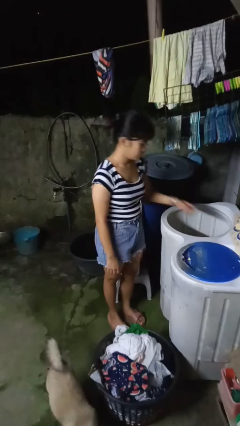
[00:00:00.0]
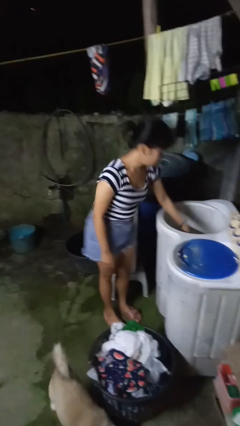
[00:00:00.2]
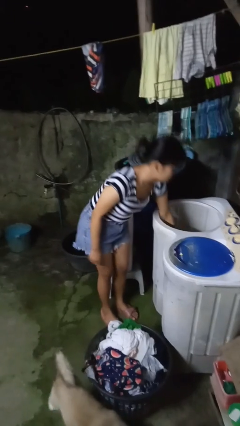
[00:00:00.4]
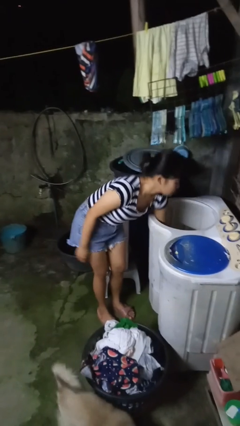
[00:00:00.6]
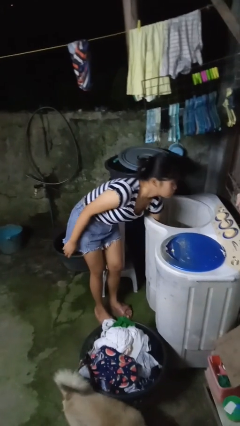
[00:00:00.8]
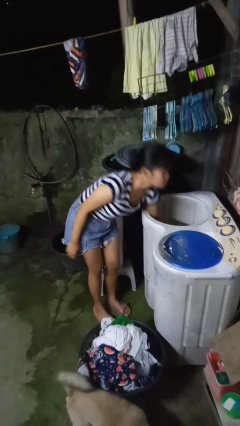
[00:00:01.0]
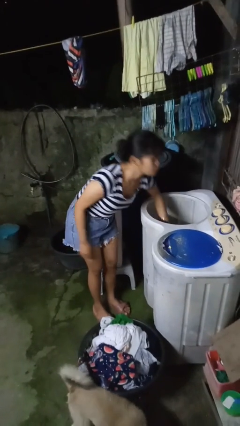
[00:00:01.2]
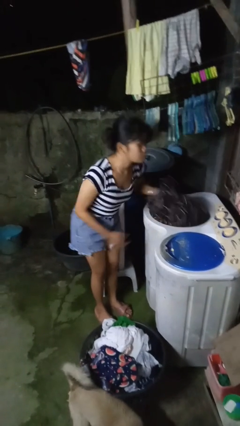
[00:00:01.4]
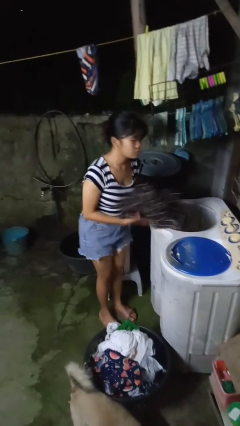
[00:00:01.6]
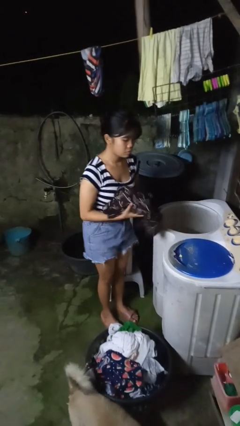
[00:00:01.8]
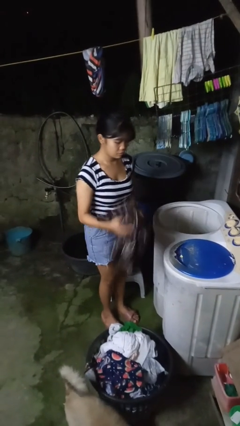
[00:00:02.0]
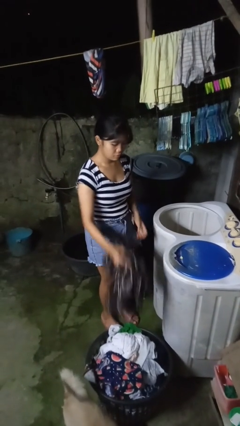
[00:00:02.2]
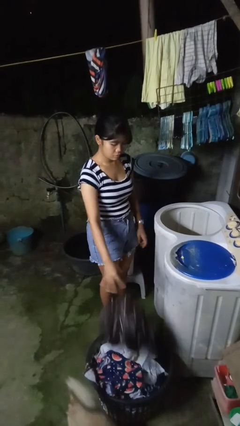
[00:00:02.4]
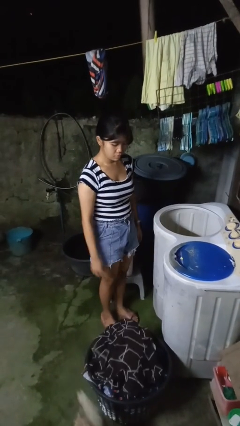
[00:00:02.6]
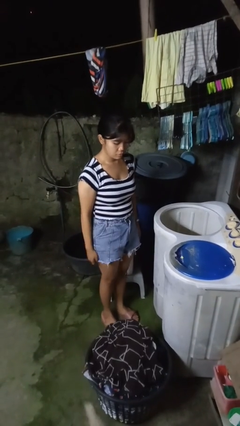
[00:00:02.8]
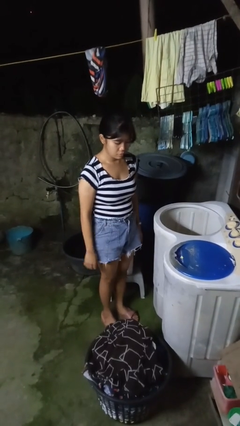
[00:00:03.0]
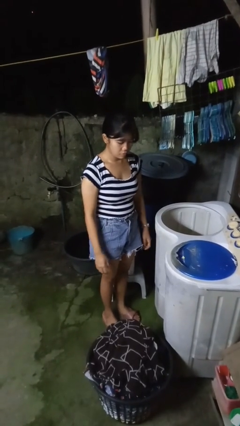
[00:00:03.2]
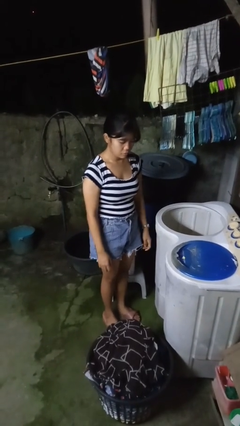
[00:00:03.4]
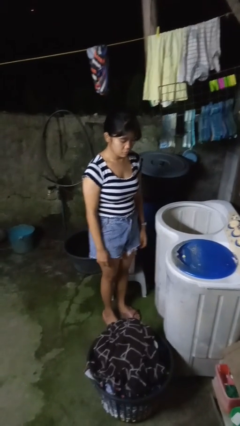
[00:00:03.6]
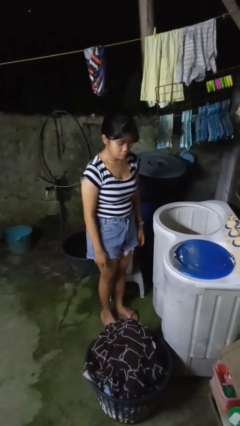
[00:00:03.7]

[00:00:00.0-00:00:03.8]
person unloads clotheswasher

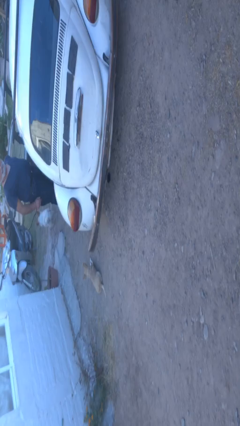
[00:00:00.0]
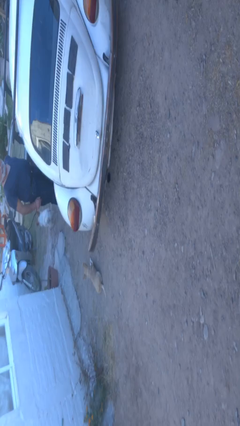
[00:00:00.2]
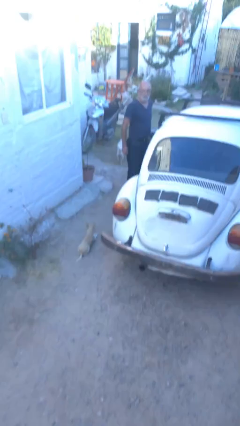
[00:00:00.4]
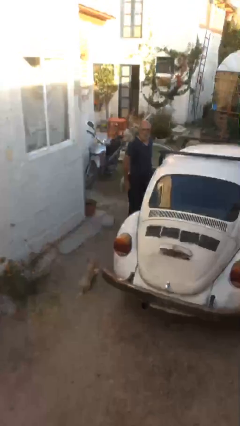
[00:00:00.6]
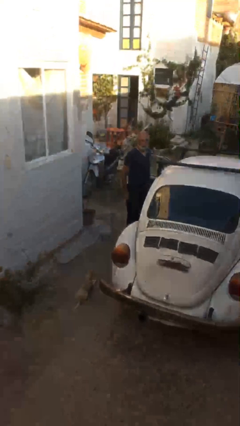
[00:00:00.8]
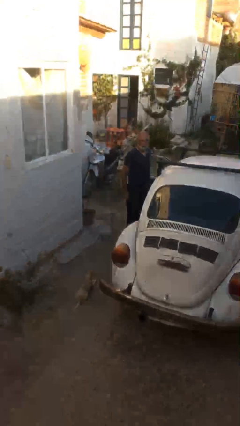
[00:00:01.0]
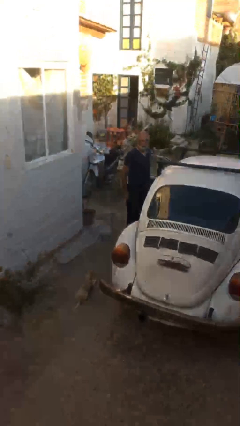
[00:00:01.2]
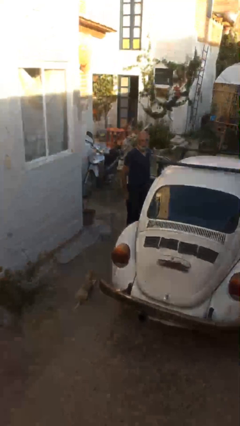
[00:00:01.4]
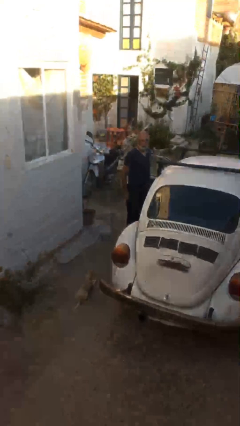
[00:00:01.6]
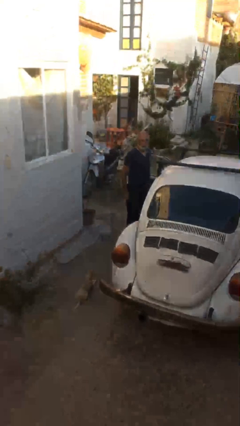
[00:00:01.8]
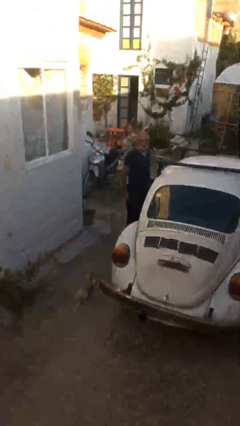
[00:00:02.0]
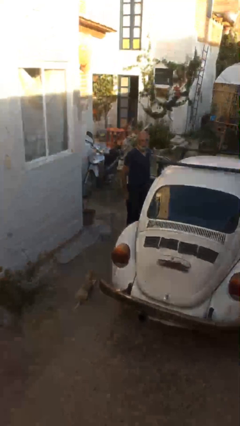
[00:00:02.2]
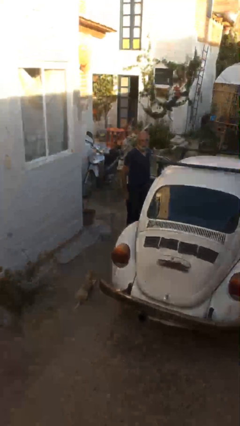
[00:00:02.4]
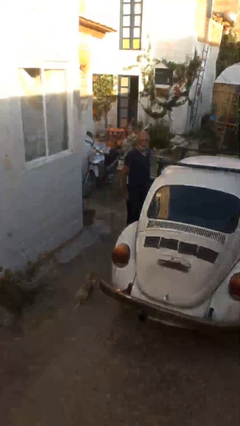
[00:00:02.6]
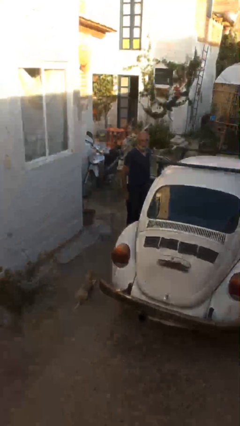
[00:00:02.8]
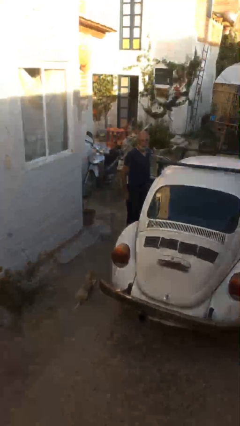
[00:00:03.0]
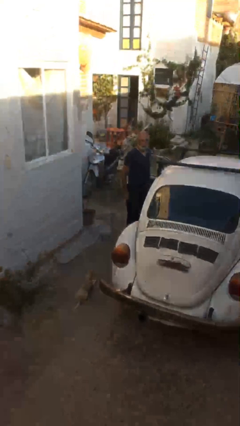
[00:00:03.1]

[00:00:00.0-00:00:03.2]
person enters car

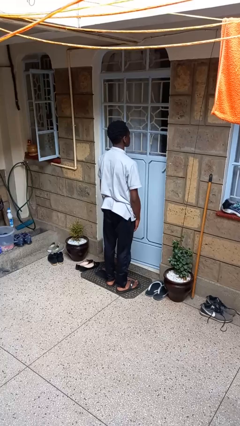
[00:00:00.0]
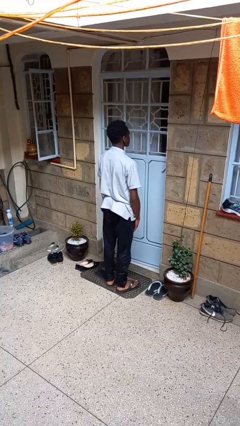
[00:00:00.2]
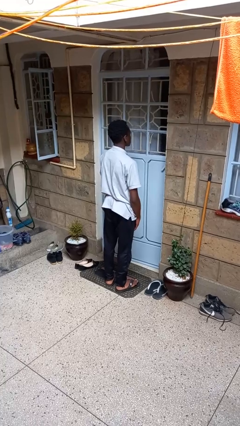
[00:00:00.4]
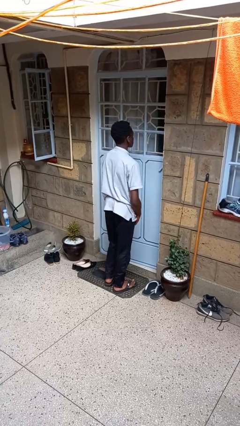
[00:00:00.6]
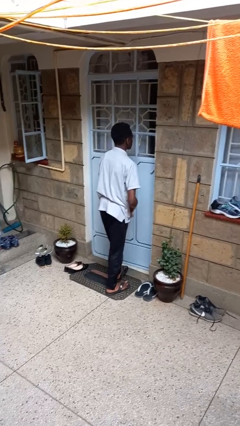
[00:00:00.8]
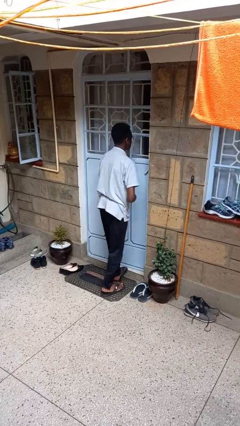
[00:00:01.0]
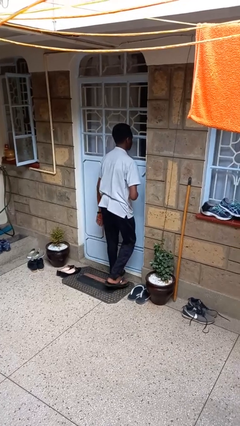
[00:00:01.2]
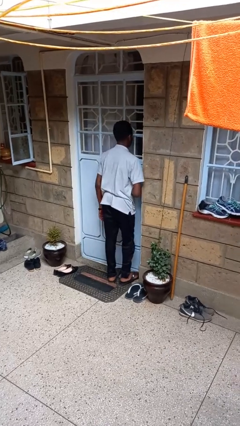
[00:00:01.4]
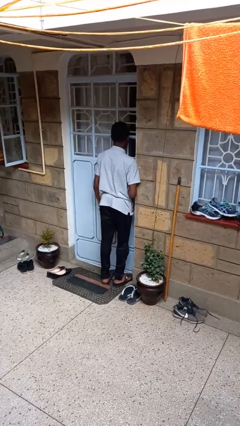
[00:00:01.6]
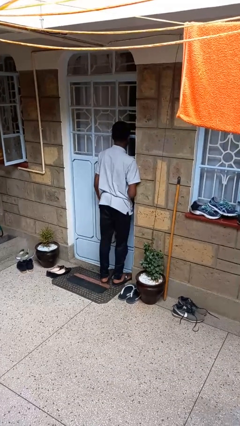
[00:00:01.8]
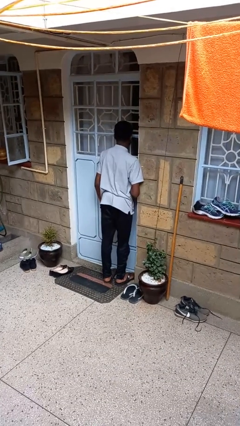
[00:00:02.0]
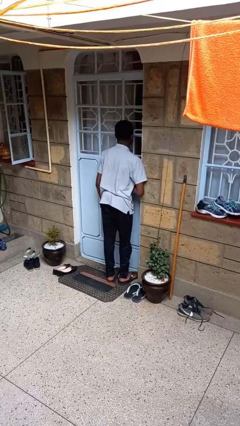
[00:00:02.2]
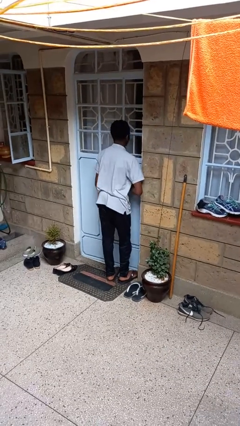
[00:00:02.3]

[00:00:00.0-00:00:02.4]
person bumps into wall

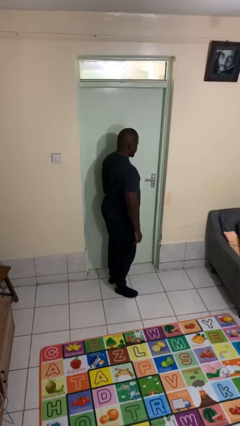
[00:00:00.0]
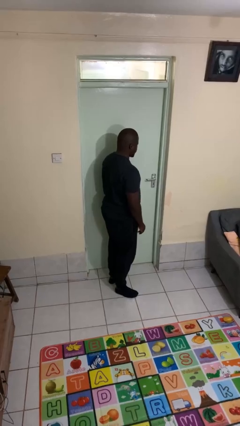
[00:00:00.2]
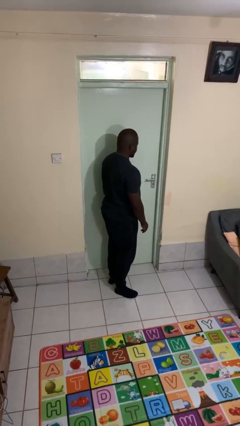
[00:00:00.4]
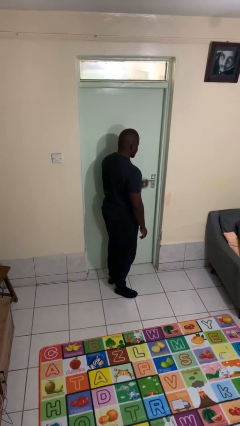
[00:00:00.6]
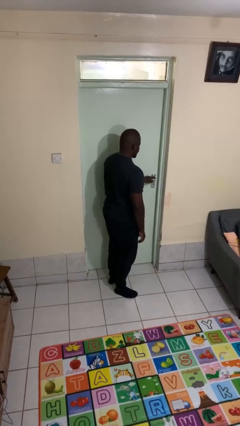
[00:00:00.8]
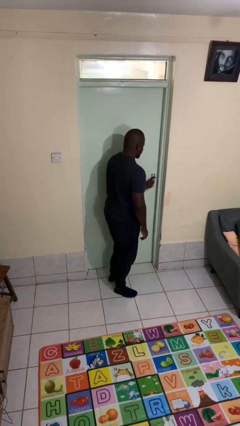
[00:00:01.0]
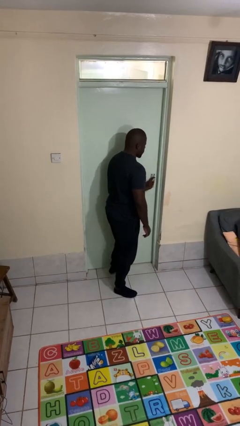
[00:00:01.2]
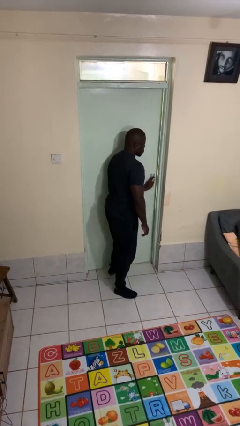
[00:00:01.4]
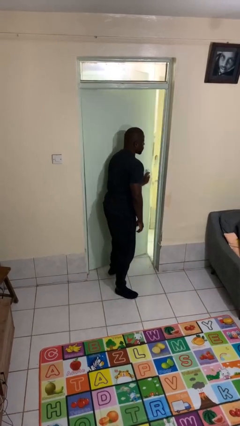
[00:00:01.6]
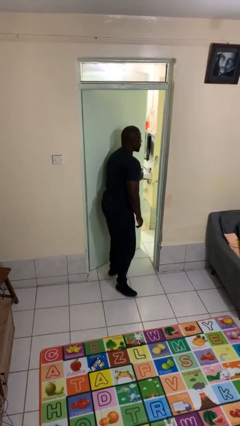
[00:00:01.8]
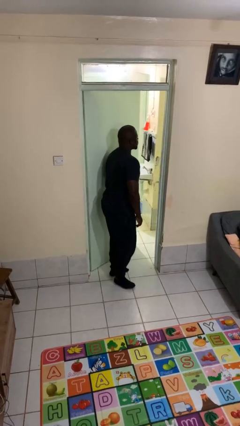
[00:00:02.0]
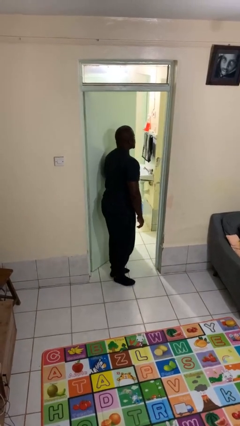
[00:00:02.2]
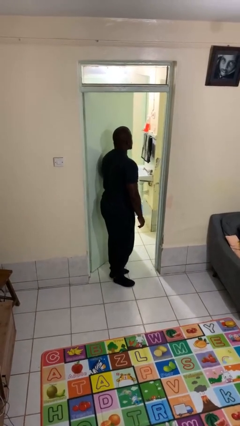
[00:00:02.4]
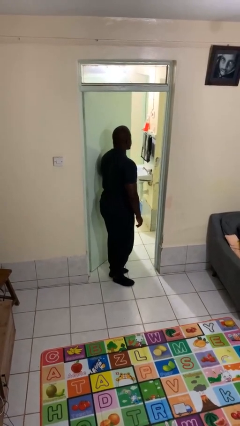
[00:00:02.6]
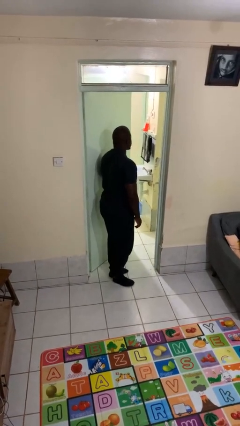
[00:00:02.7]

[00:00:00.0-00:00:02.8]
person opens facility door

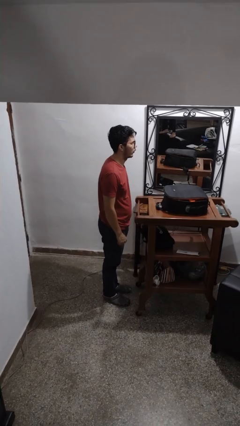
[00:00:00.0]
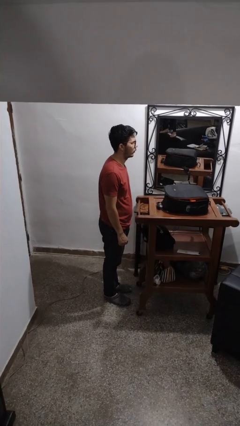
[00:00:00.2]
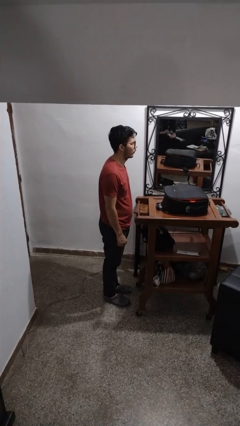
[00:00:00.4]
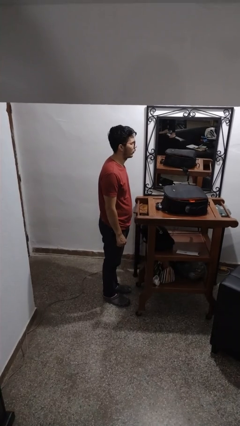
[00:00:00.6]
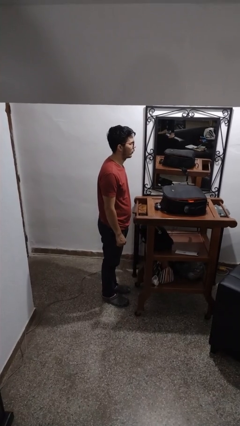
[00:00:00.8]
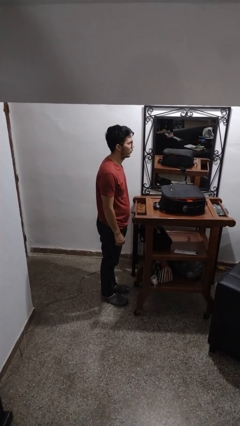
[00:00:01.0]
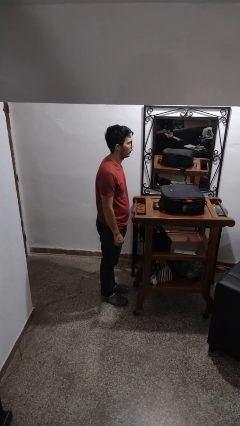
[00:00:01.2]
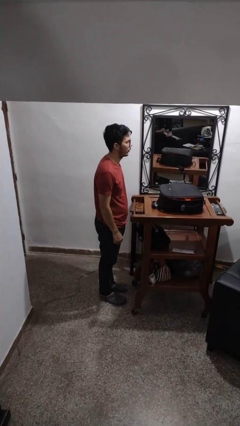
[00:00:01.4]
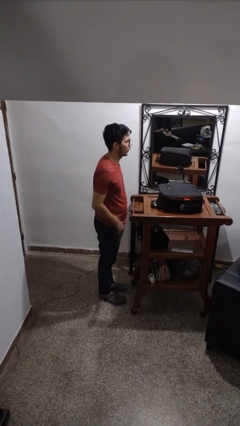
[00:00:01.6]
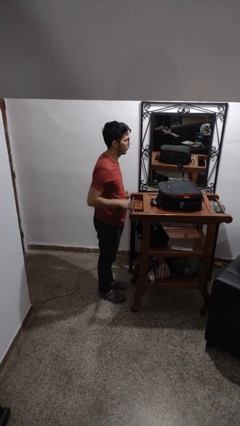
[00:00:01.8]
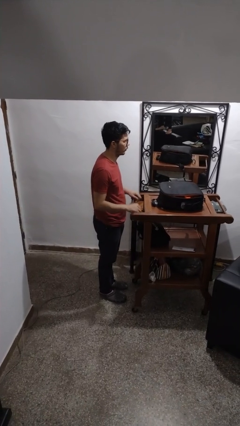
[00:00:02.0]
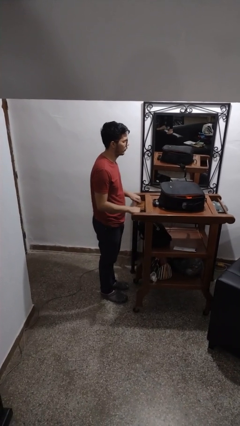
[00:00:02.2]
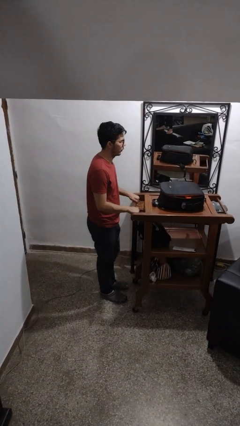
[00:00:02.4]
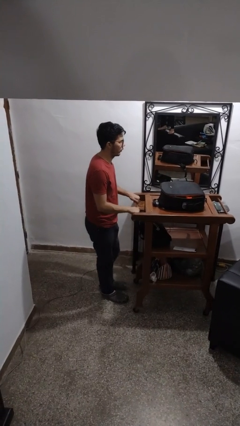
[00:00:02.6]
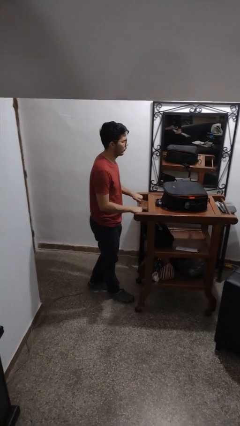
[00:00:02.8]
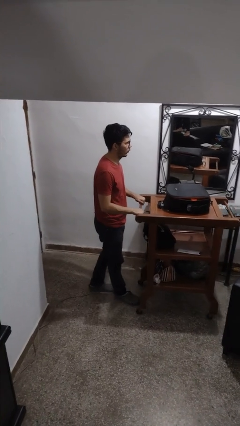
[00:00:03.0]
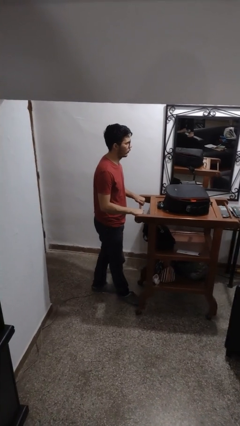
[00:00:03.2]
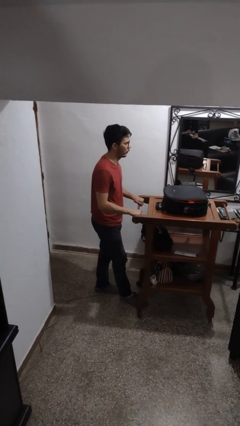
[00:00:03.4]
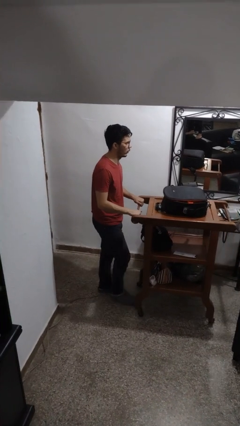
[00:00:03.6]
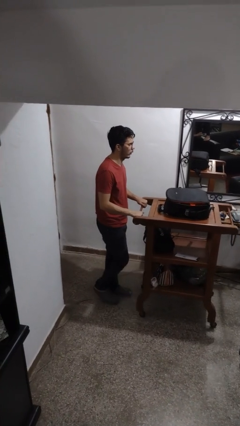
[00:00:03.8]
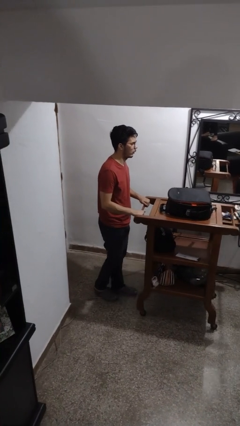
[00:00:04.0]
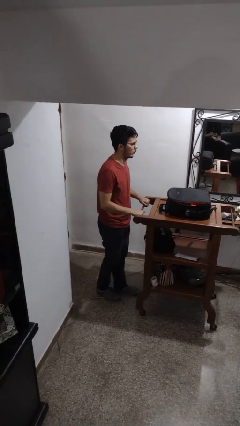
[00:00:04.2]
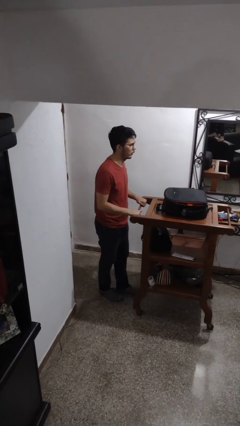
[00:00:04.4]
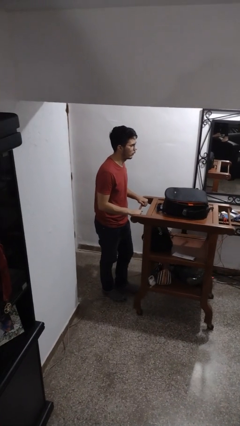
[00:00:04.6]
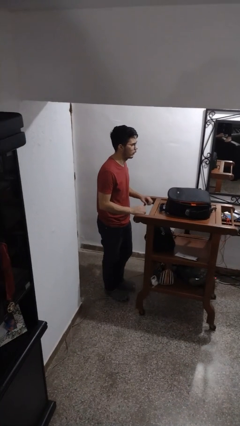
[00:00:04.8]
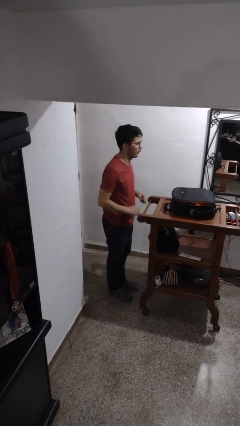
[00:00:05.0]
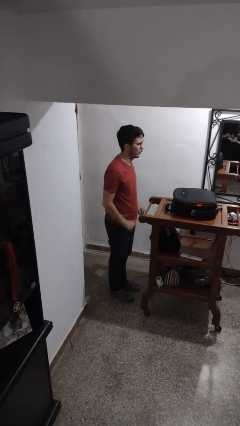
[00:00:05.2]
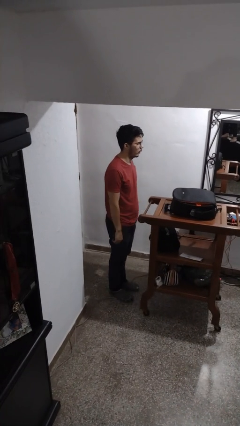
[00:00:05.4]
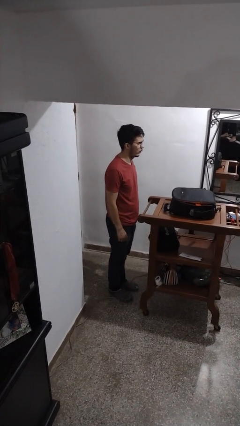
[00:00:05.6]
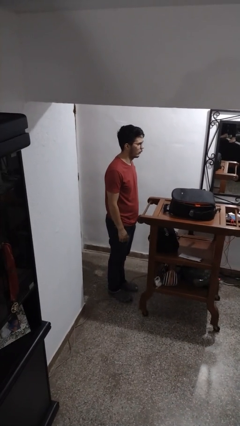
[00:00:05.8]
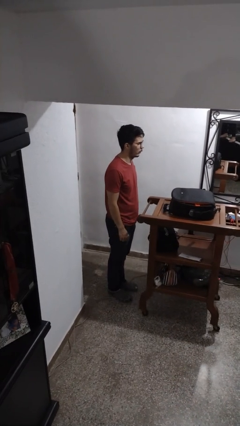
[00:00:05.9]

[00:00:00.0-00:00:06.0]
person pulls wheeled cart
